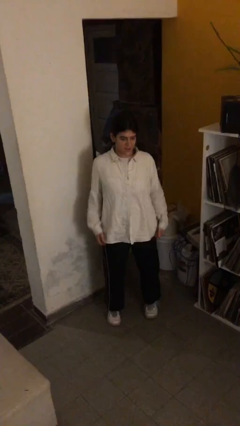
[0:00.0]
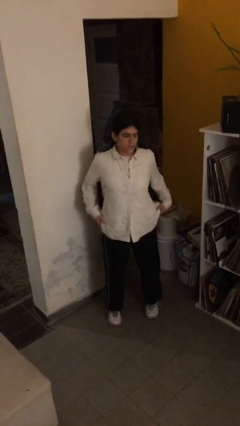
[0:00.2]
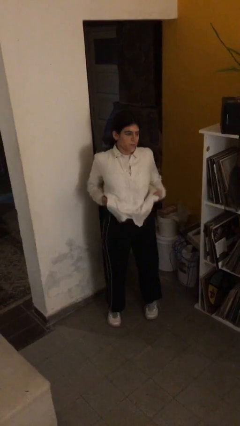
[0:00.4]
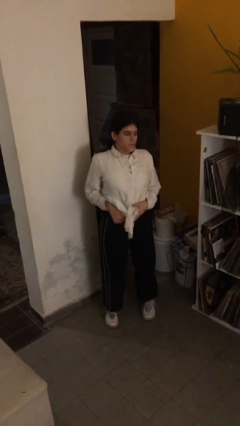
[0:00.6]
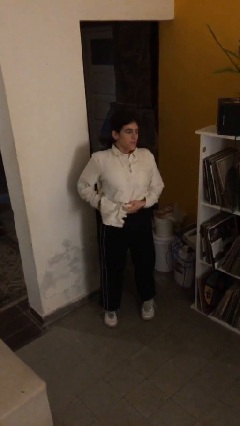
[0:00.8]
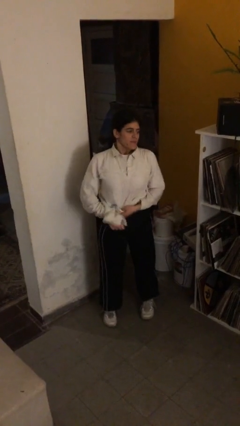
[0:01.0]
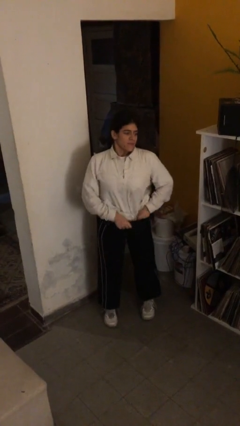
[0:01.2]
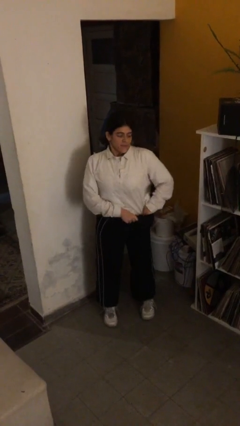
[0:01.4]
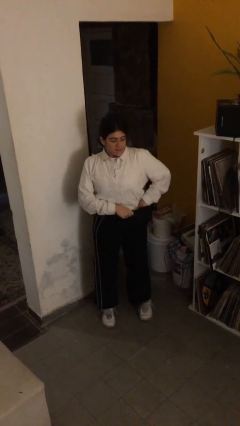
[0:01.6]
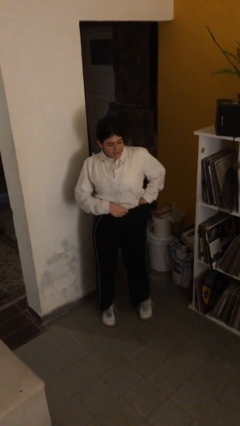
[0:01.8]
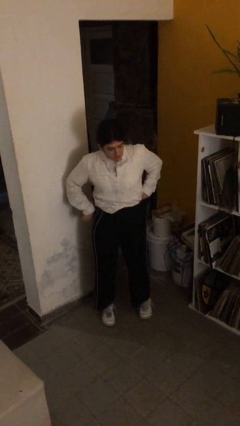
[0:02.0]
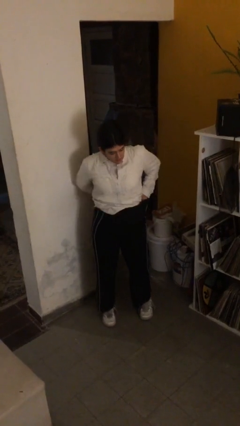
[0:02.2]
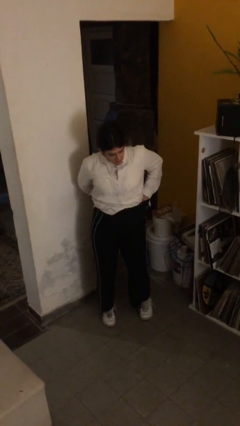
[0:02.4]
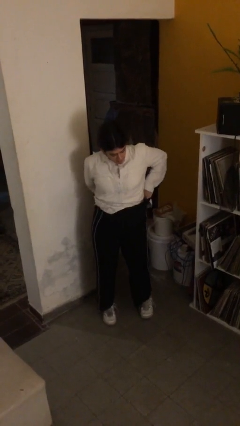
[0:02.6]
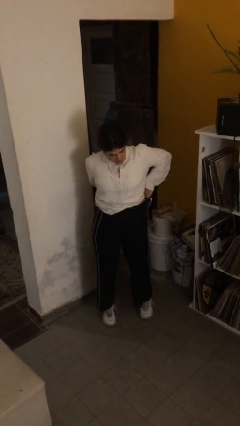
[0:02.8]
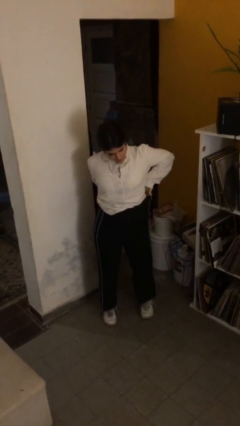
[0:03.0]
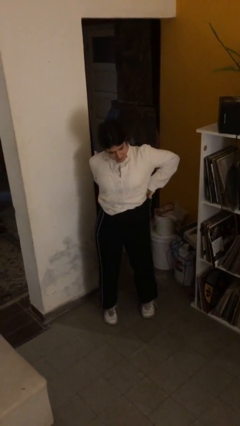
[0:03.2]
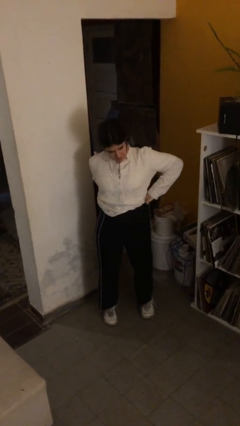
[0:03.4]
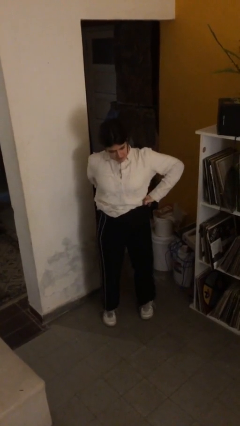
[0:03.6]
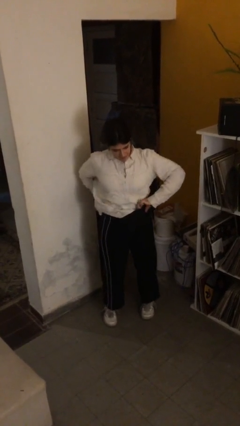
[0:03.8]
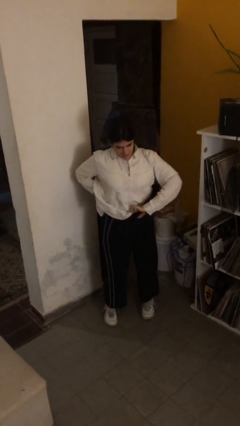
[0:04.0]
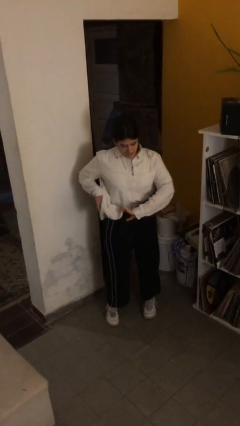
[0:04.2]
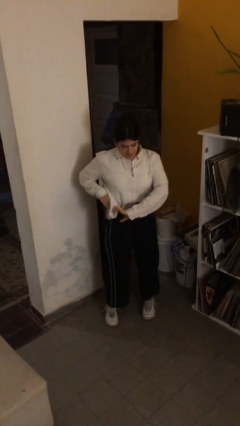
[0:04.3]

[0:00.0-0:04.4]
person tucks in shirt

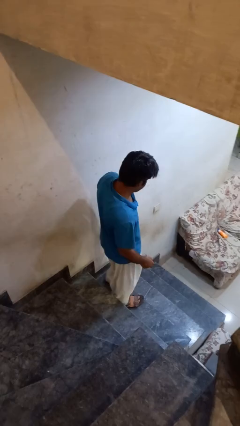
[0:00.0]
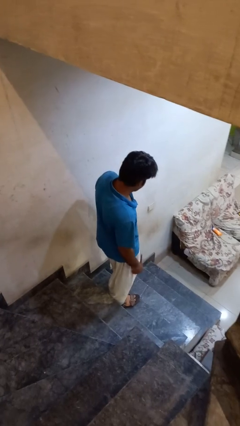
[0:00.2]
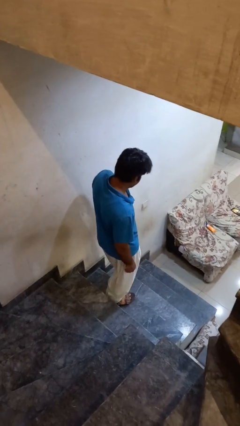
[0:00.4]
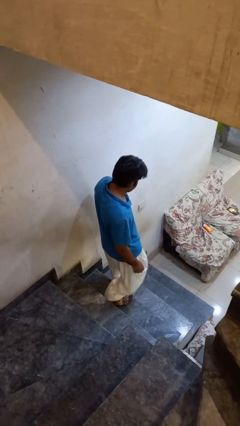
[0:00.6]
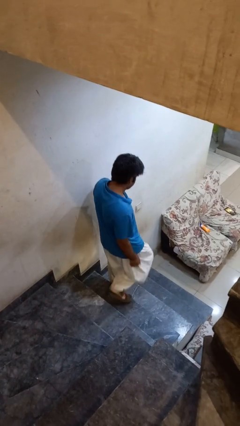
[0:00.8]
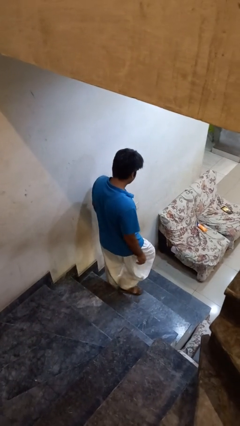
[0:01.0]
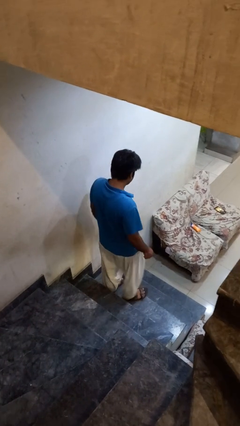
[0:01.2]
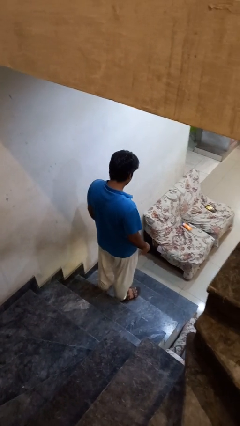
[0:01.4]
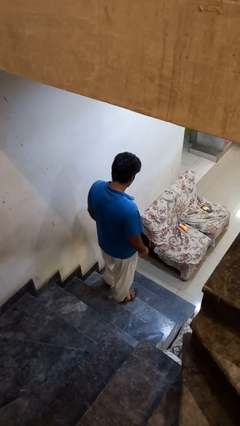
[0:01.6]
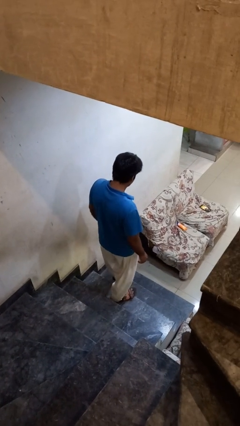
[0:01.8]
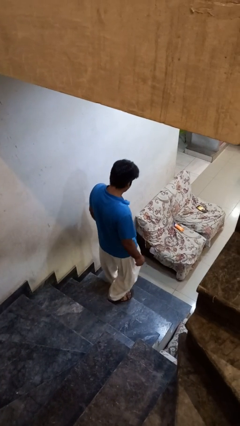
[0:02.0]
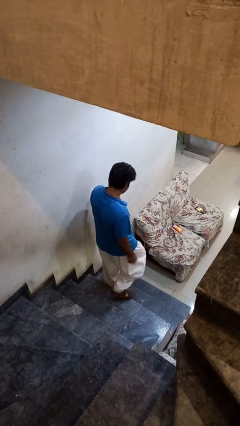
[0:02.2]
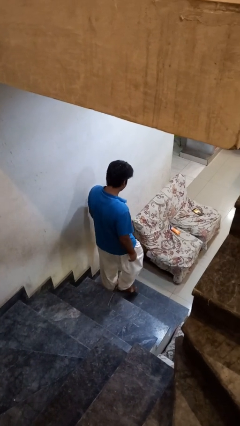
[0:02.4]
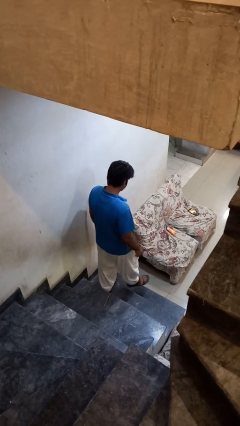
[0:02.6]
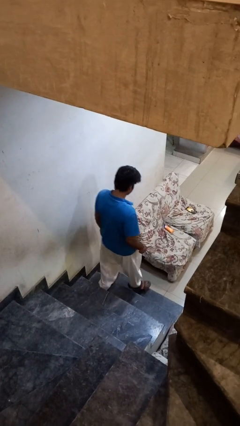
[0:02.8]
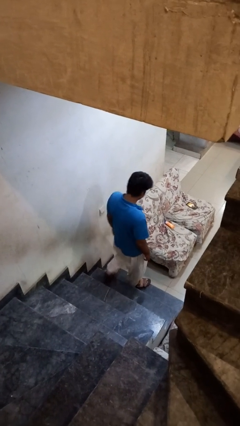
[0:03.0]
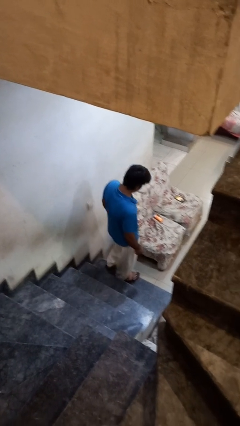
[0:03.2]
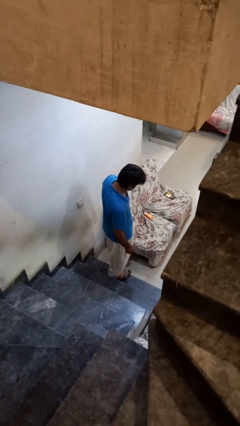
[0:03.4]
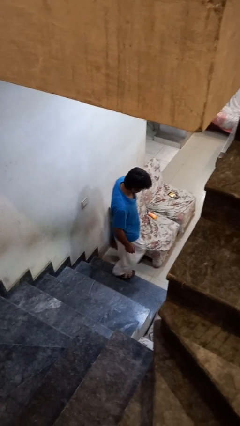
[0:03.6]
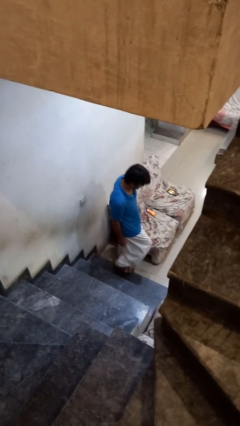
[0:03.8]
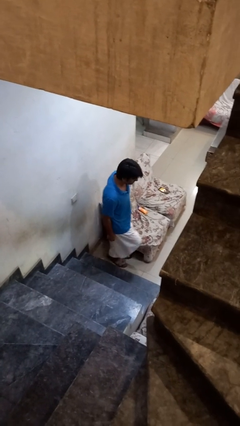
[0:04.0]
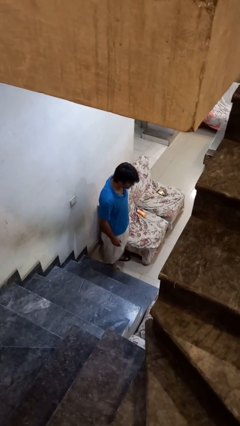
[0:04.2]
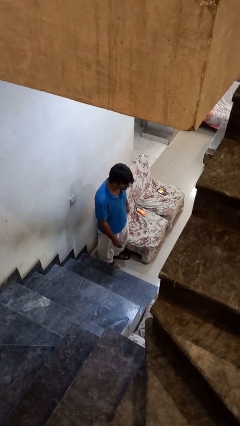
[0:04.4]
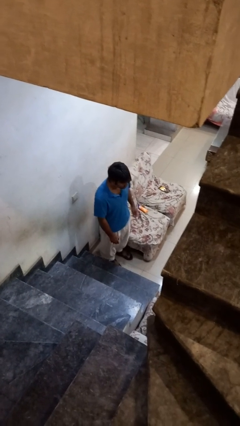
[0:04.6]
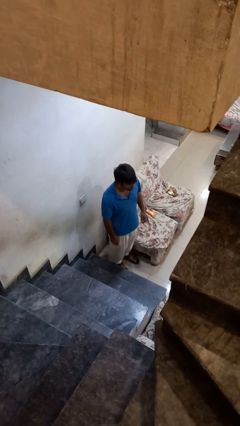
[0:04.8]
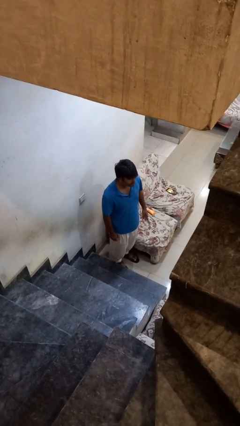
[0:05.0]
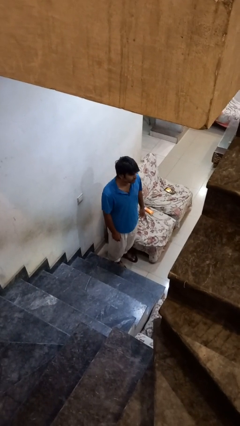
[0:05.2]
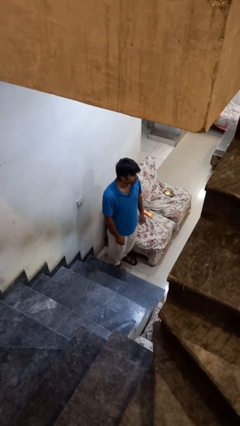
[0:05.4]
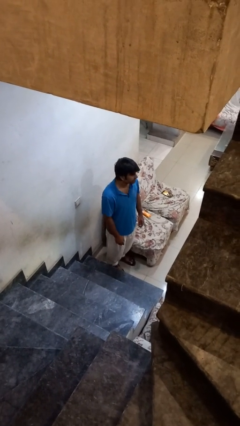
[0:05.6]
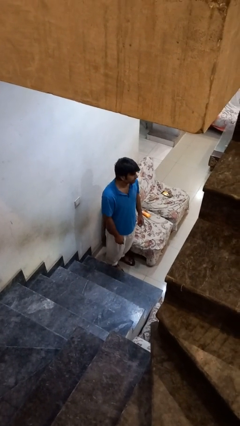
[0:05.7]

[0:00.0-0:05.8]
person climbs down stairs

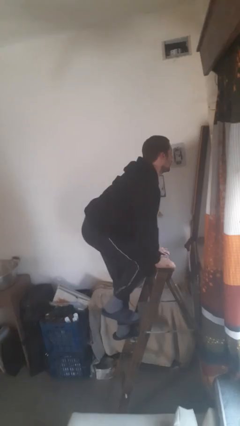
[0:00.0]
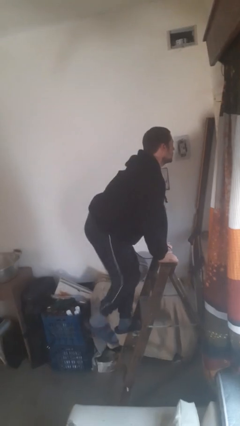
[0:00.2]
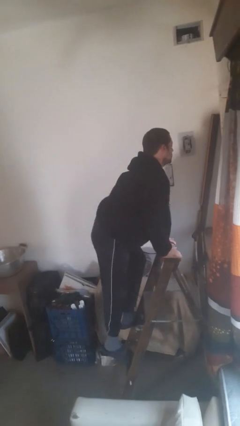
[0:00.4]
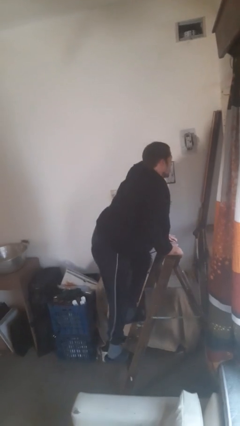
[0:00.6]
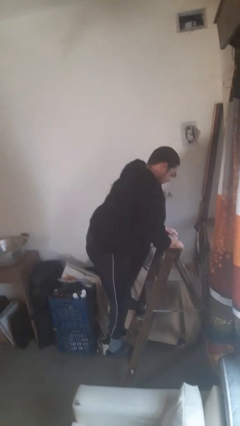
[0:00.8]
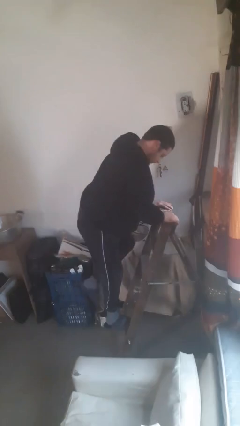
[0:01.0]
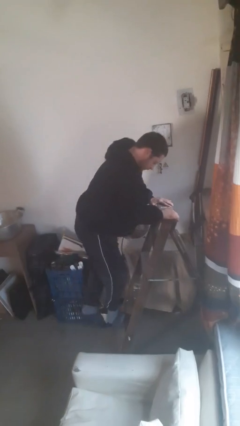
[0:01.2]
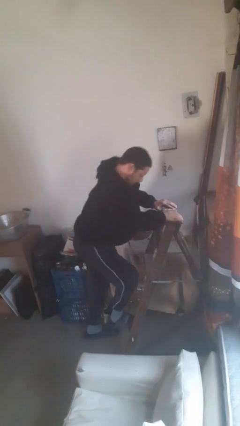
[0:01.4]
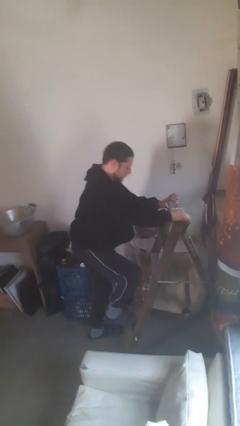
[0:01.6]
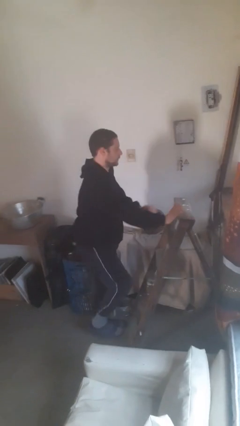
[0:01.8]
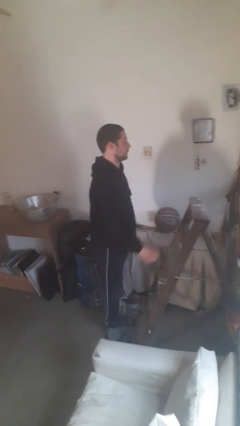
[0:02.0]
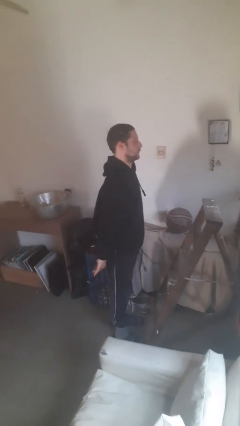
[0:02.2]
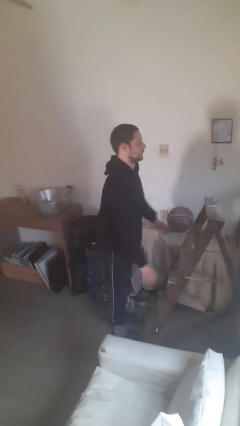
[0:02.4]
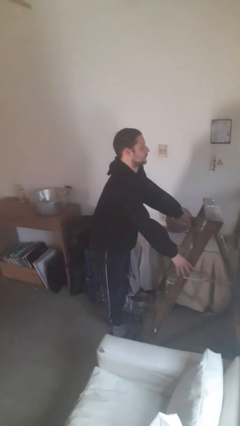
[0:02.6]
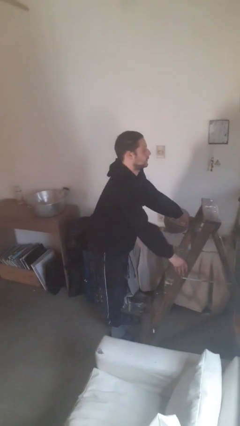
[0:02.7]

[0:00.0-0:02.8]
person climbs down ladder

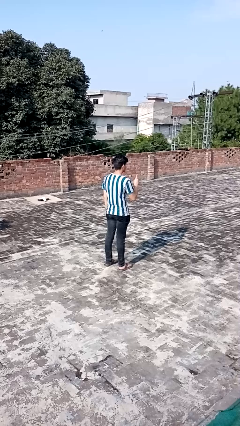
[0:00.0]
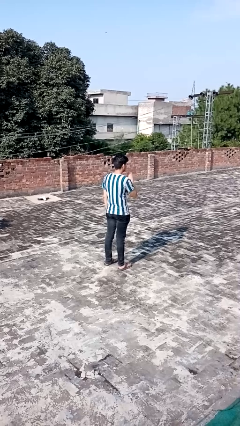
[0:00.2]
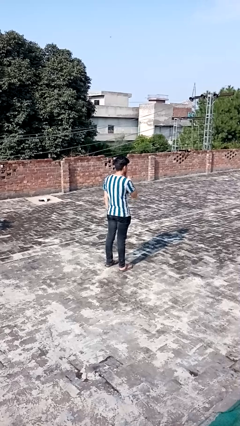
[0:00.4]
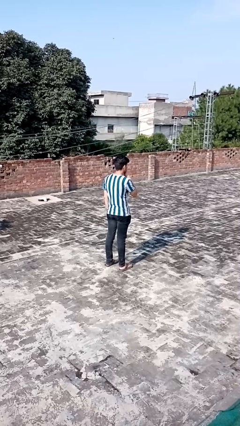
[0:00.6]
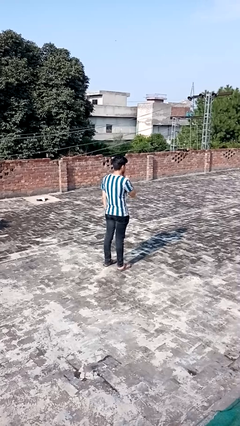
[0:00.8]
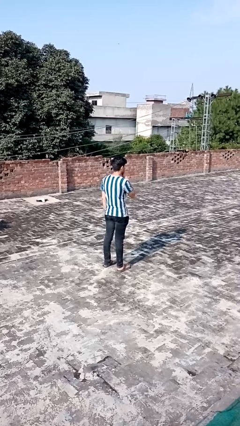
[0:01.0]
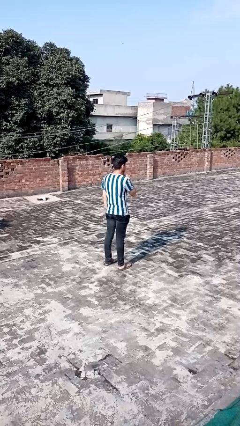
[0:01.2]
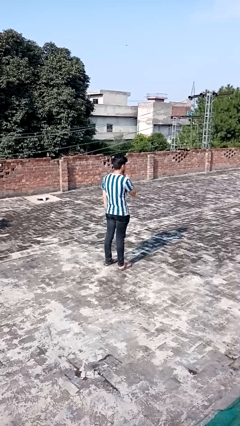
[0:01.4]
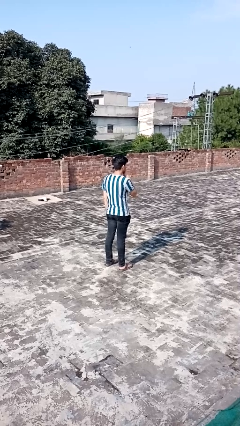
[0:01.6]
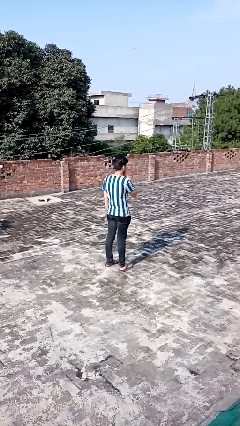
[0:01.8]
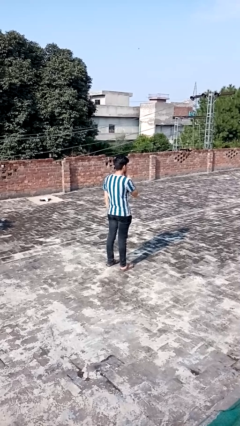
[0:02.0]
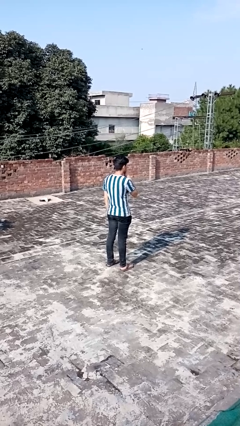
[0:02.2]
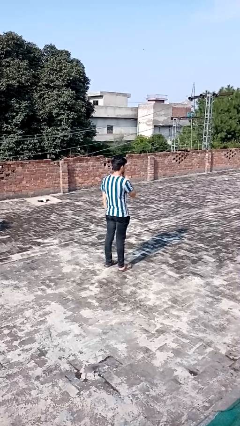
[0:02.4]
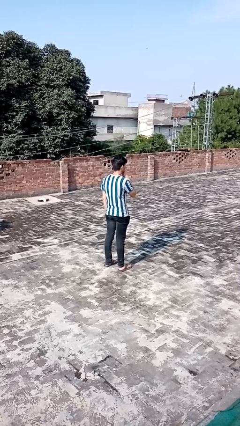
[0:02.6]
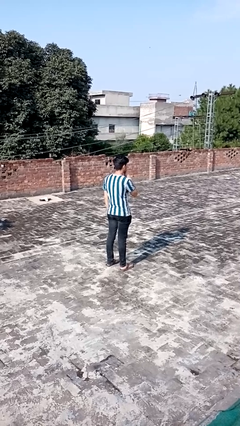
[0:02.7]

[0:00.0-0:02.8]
person gestures be quiet

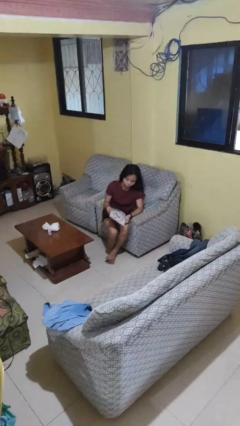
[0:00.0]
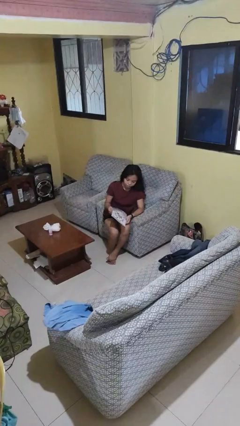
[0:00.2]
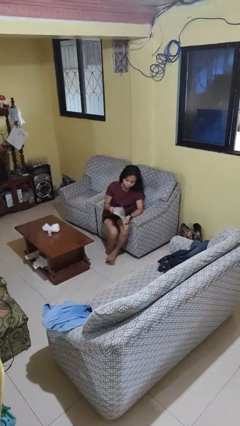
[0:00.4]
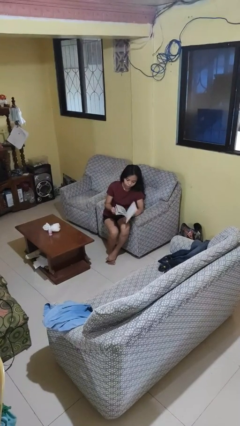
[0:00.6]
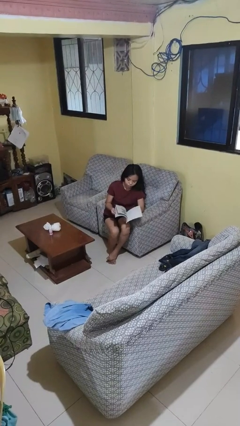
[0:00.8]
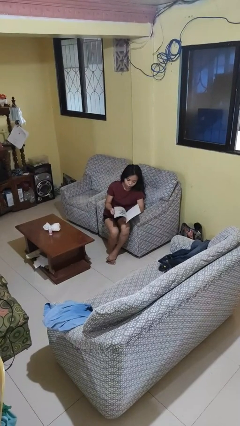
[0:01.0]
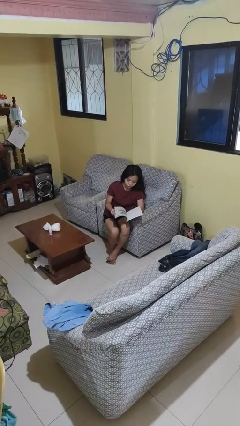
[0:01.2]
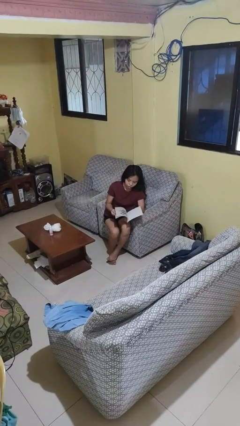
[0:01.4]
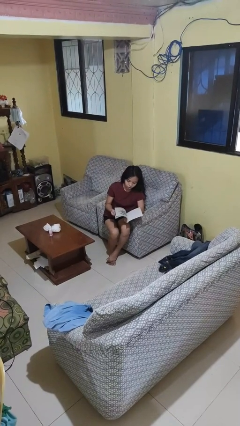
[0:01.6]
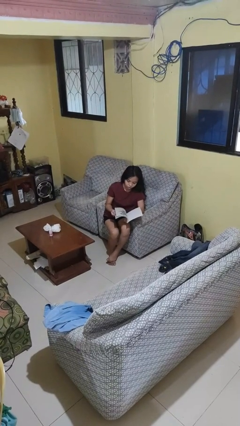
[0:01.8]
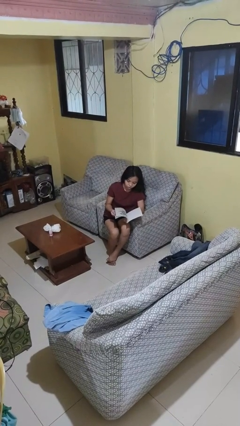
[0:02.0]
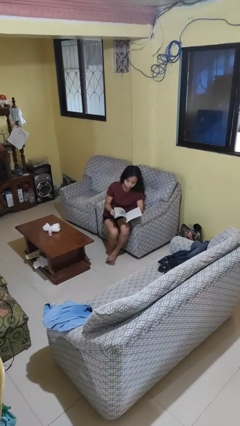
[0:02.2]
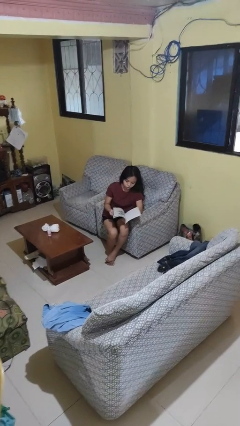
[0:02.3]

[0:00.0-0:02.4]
person reads book
